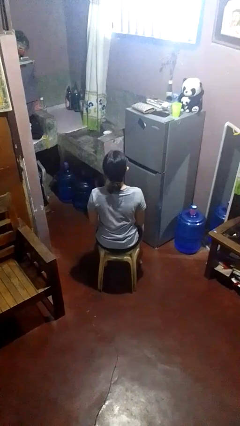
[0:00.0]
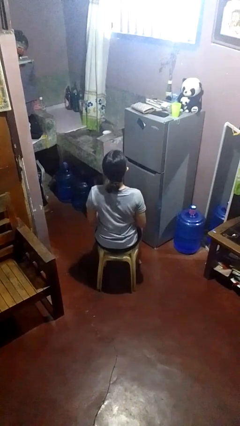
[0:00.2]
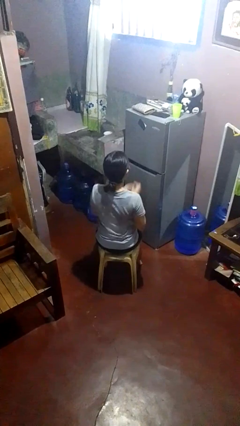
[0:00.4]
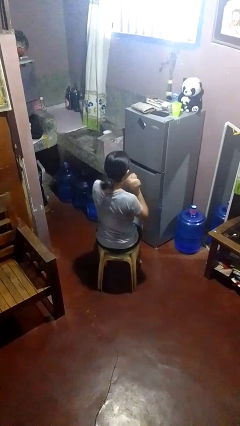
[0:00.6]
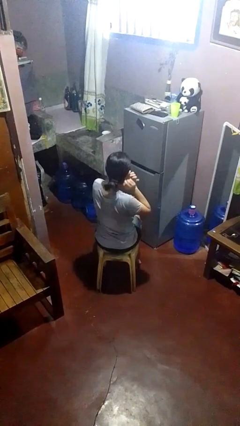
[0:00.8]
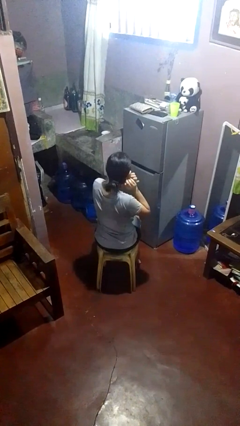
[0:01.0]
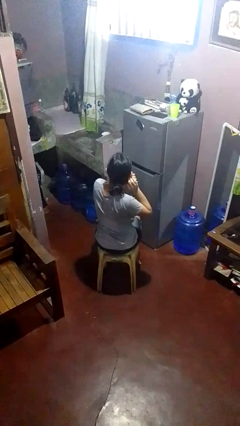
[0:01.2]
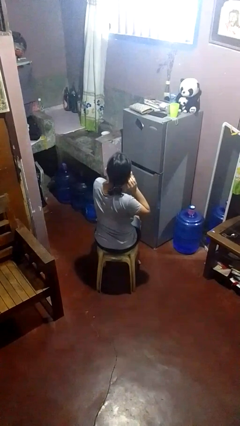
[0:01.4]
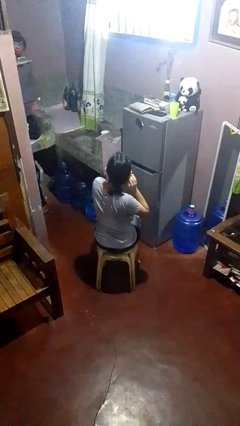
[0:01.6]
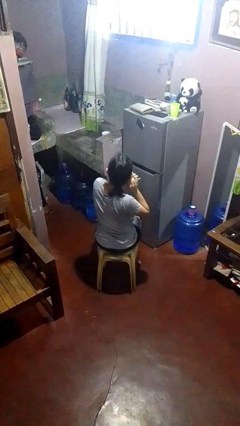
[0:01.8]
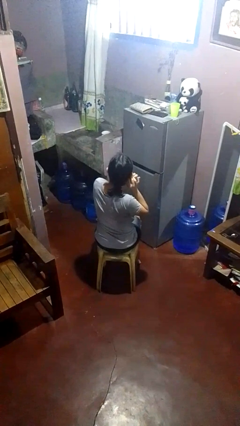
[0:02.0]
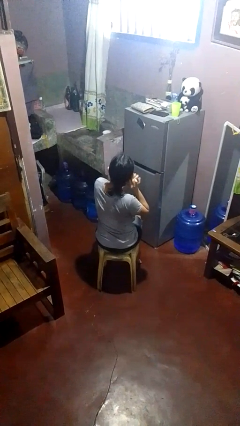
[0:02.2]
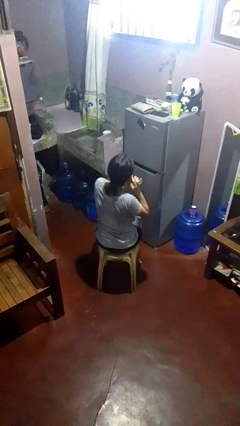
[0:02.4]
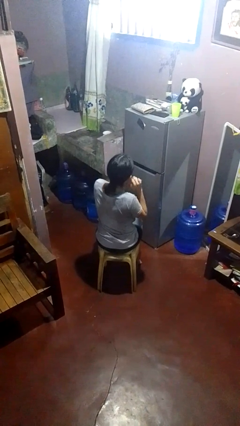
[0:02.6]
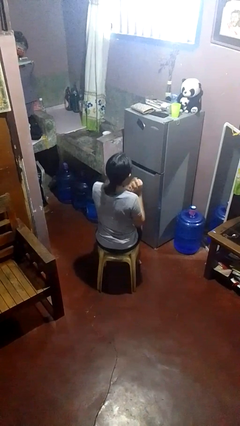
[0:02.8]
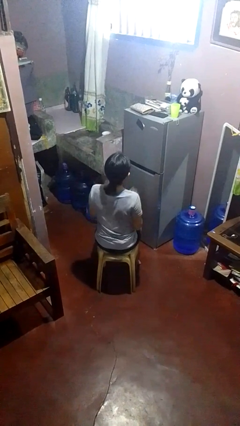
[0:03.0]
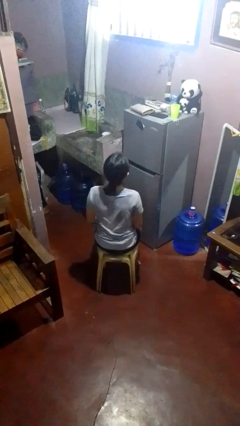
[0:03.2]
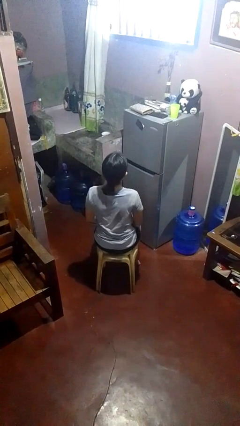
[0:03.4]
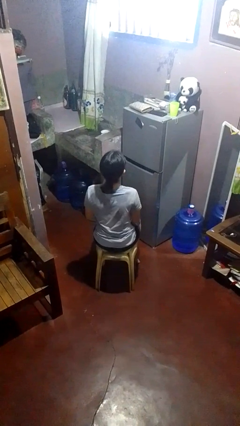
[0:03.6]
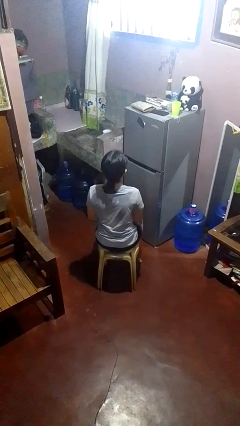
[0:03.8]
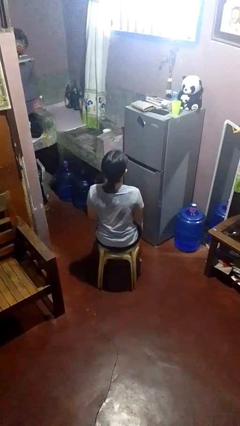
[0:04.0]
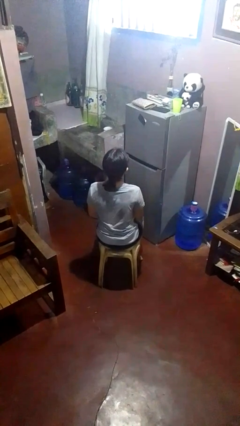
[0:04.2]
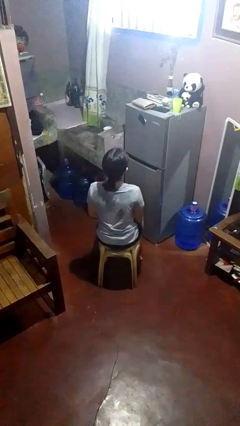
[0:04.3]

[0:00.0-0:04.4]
person puts on earrings

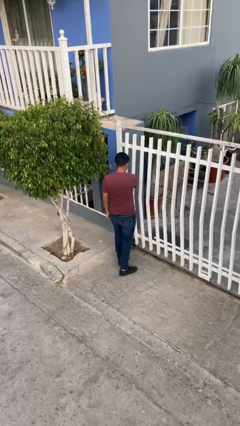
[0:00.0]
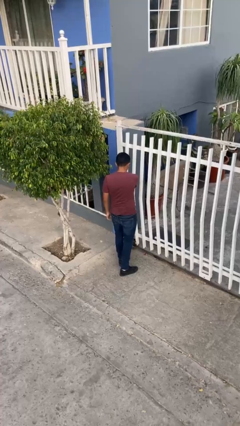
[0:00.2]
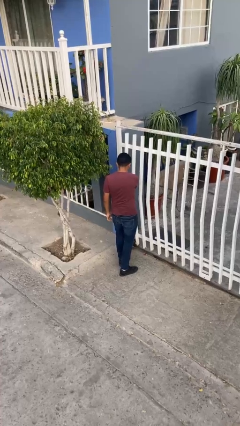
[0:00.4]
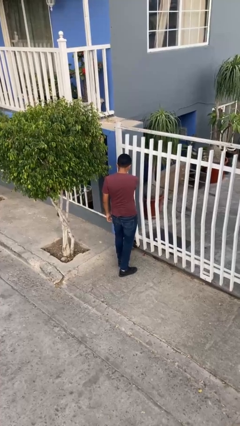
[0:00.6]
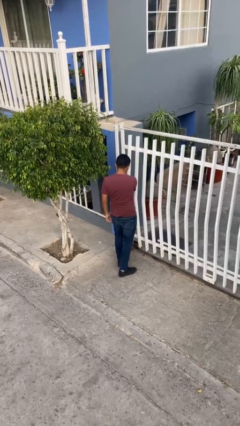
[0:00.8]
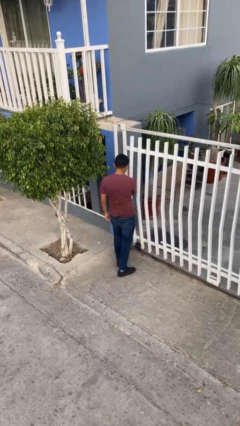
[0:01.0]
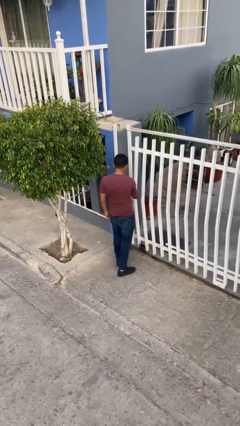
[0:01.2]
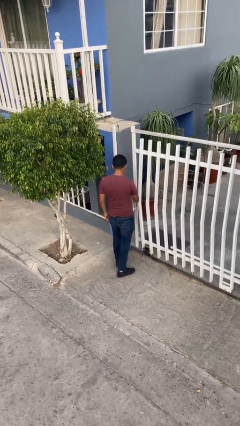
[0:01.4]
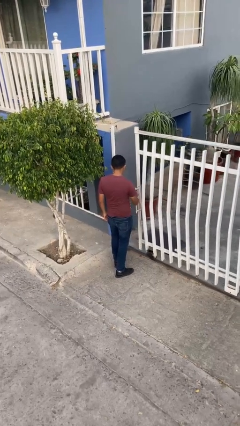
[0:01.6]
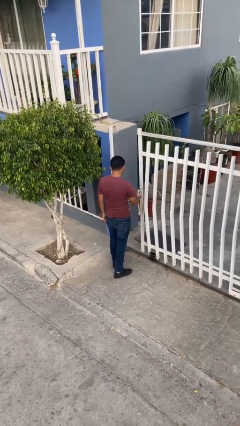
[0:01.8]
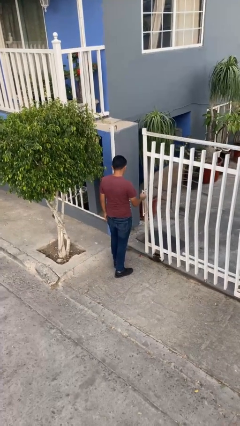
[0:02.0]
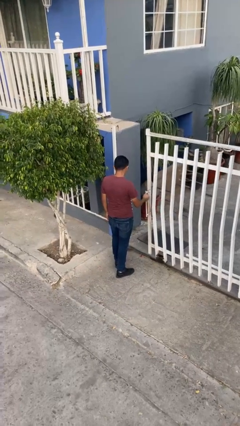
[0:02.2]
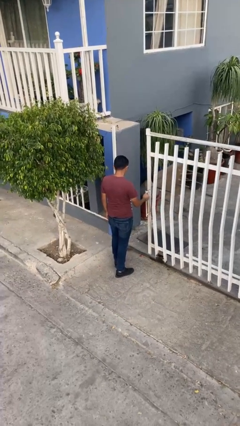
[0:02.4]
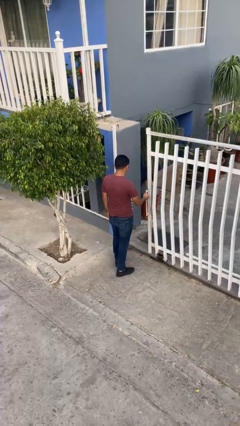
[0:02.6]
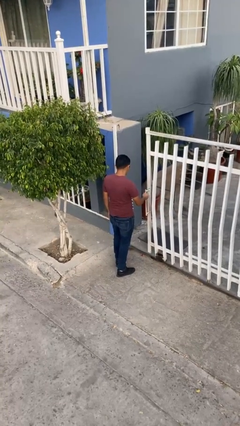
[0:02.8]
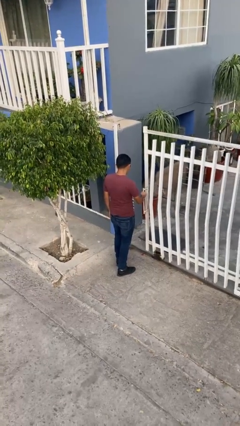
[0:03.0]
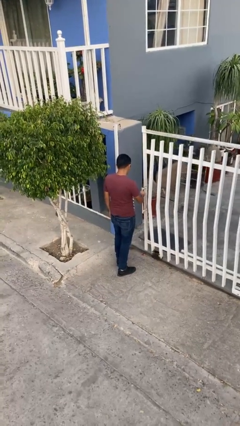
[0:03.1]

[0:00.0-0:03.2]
person opens facility door

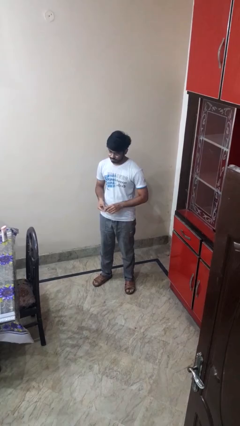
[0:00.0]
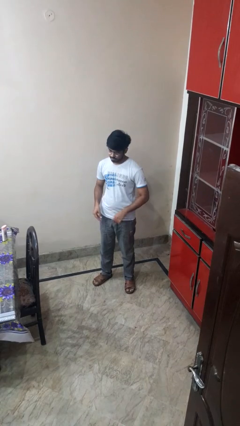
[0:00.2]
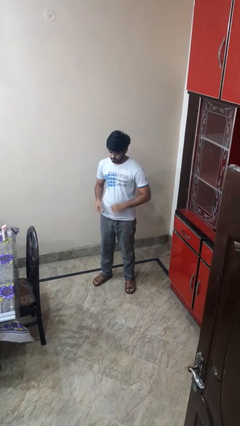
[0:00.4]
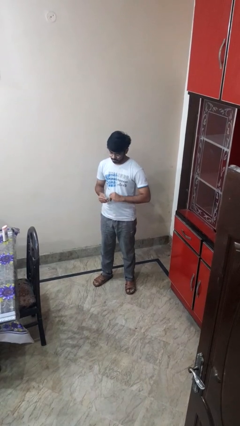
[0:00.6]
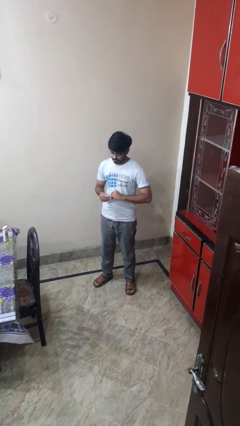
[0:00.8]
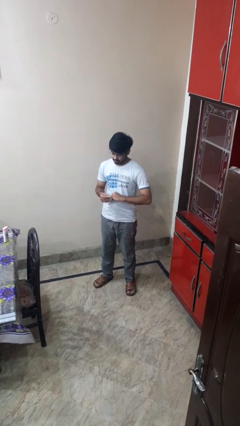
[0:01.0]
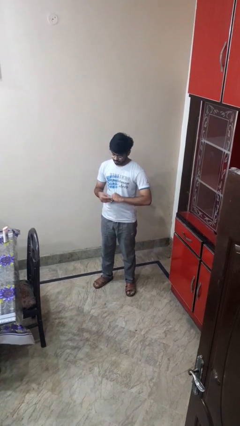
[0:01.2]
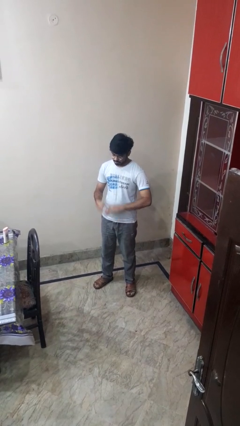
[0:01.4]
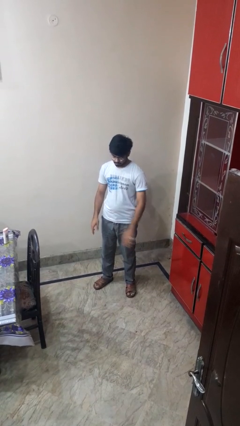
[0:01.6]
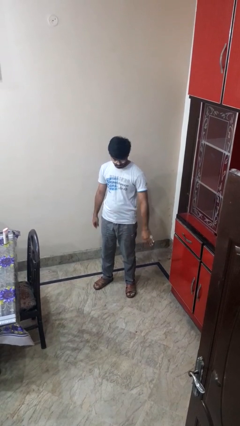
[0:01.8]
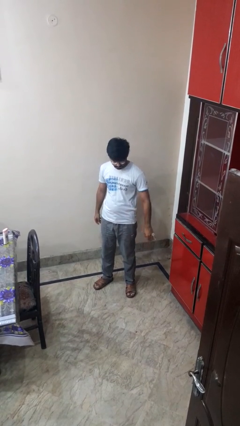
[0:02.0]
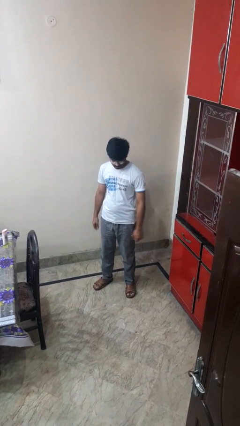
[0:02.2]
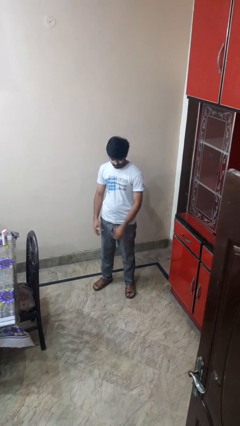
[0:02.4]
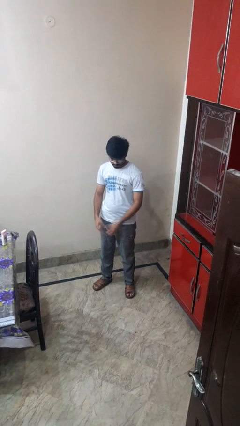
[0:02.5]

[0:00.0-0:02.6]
person puts on ring

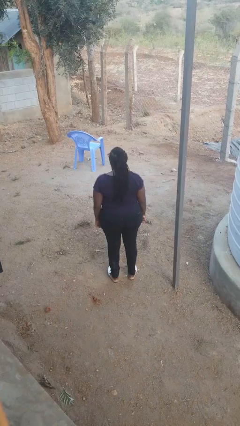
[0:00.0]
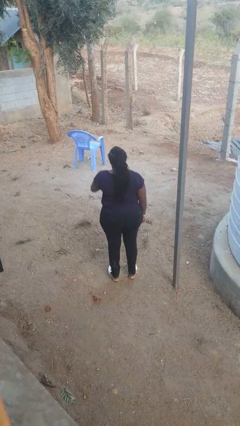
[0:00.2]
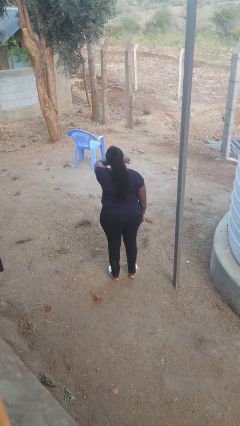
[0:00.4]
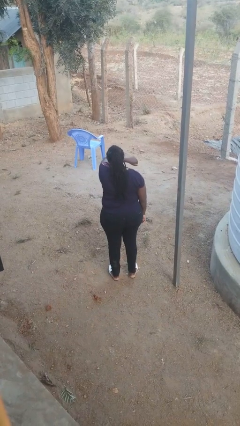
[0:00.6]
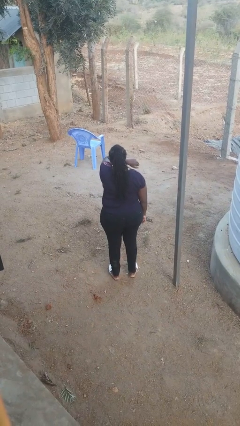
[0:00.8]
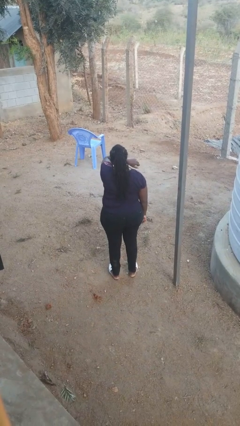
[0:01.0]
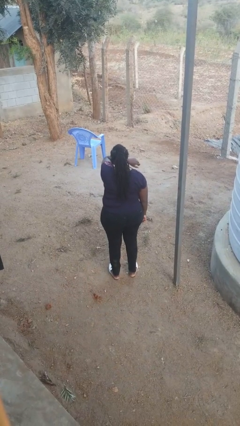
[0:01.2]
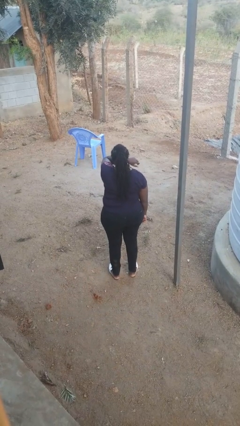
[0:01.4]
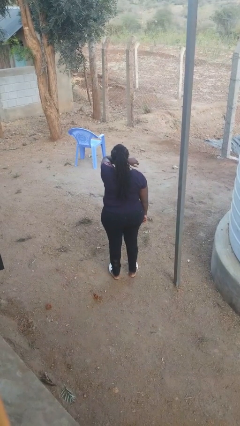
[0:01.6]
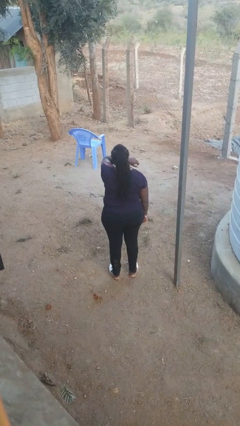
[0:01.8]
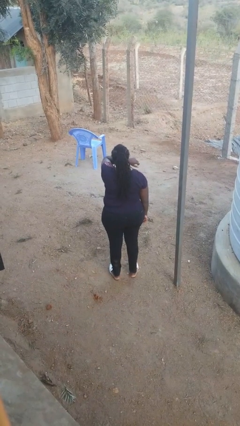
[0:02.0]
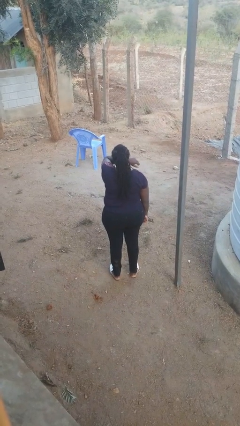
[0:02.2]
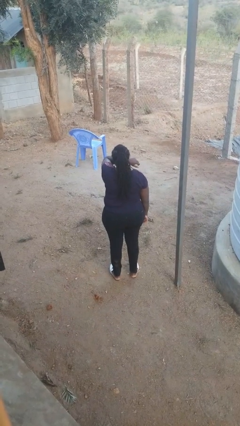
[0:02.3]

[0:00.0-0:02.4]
person sneezes into arm

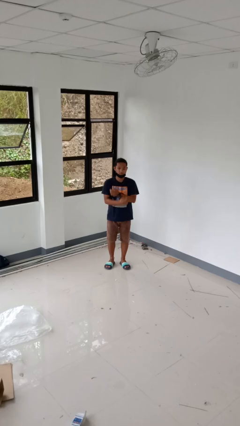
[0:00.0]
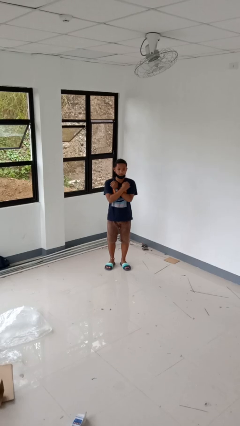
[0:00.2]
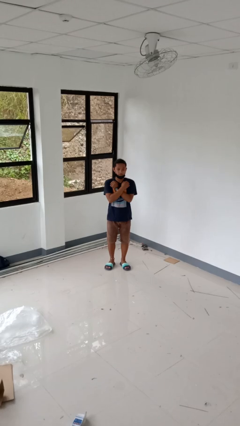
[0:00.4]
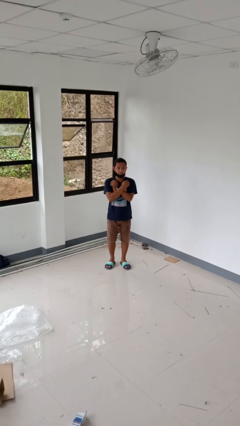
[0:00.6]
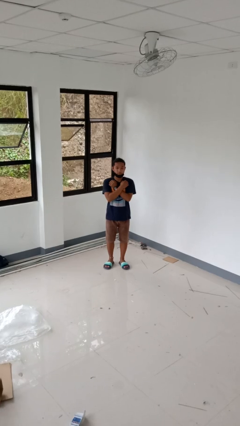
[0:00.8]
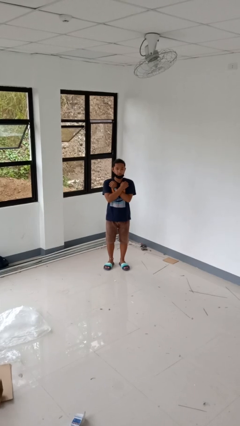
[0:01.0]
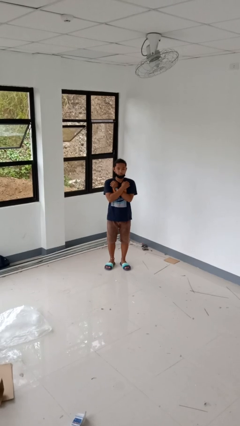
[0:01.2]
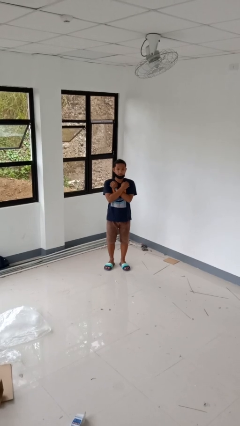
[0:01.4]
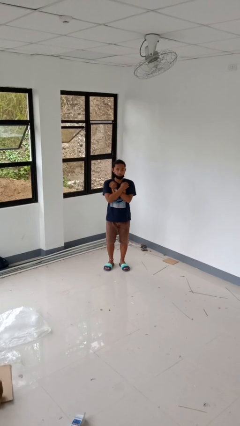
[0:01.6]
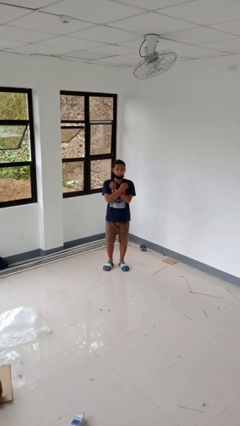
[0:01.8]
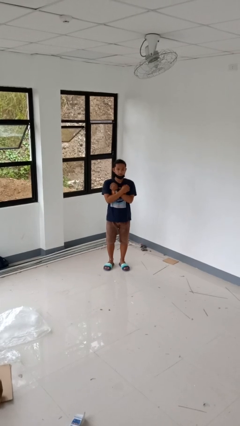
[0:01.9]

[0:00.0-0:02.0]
person gestures arms x

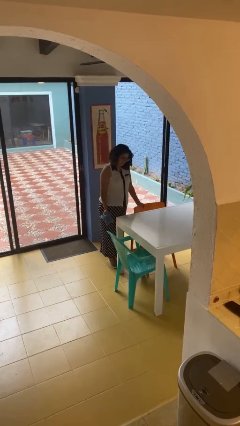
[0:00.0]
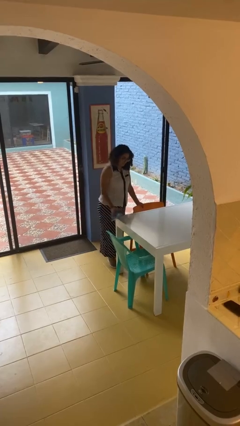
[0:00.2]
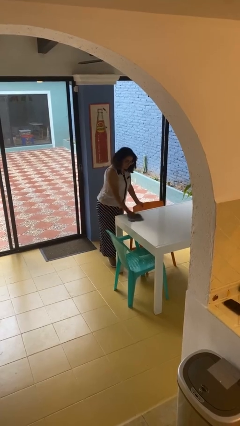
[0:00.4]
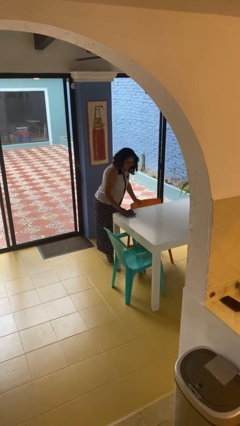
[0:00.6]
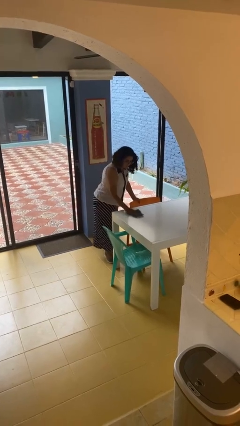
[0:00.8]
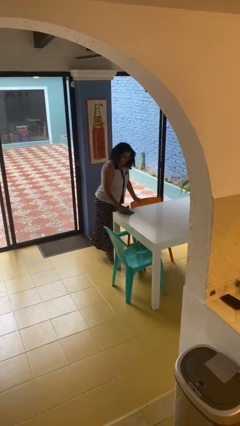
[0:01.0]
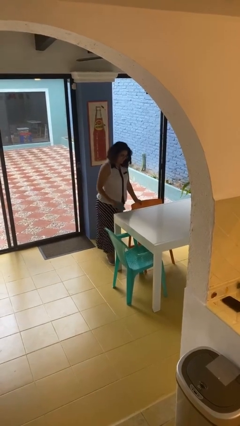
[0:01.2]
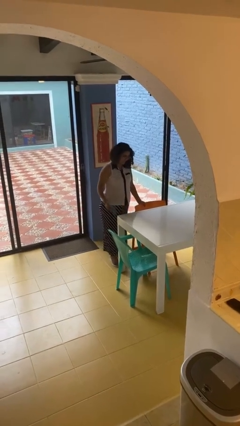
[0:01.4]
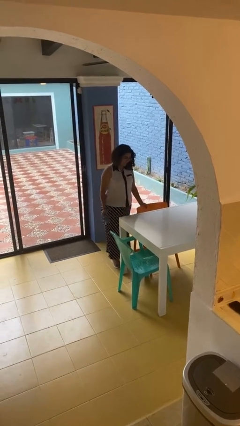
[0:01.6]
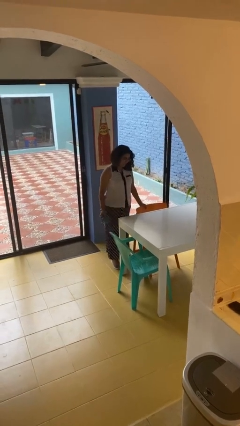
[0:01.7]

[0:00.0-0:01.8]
person cleans table with rag

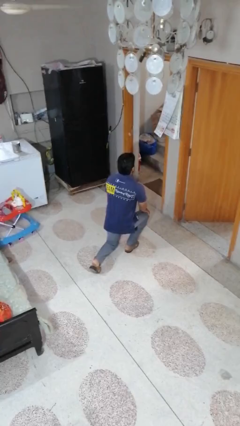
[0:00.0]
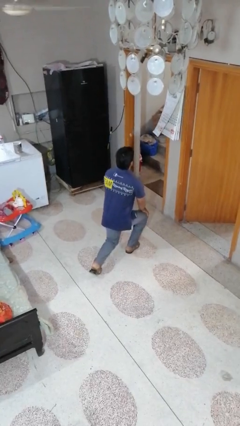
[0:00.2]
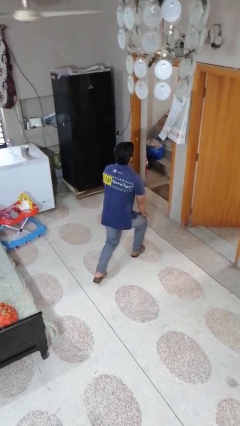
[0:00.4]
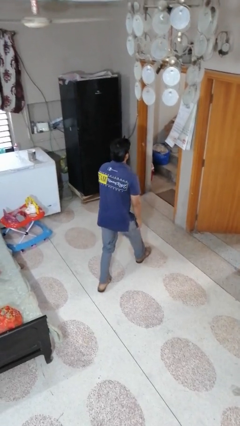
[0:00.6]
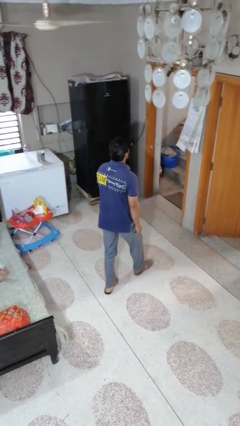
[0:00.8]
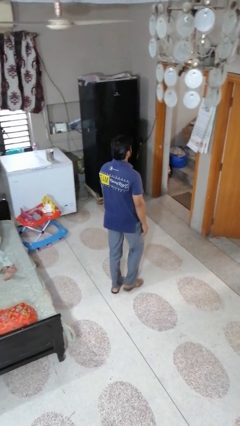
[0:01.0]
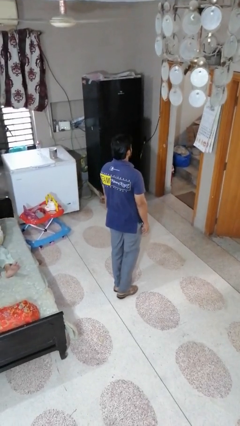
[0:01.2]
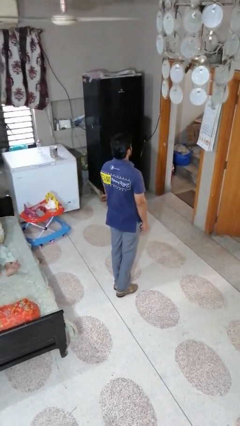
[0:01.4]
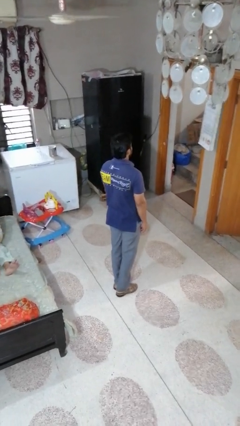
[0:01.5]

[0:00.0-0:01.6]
person stands up from floor
